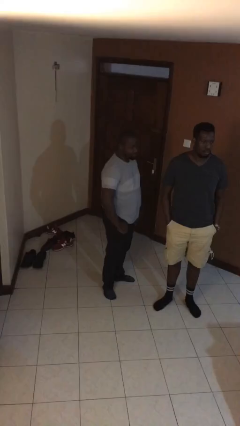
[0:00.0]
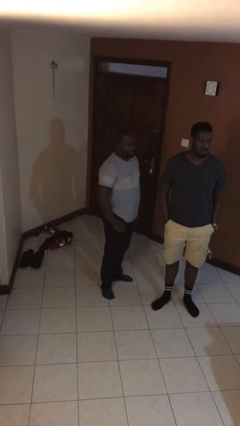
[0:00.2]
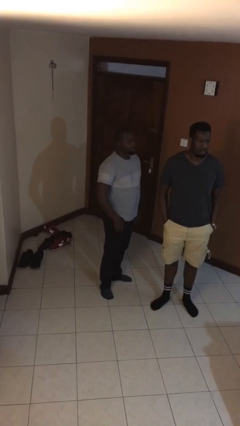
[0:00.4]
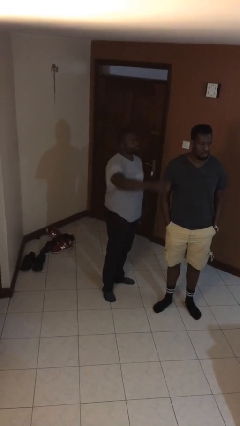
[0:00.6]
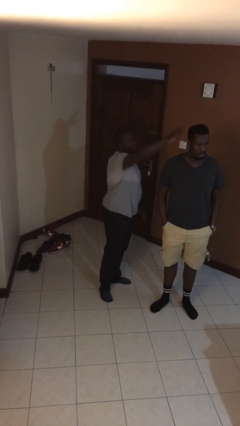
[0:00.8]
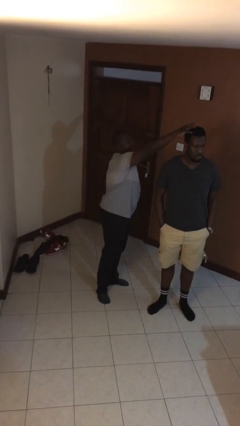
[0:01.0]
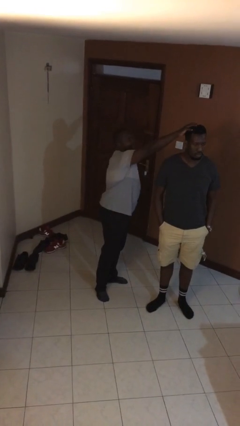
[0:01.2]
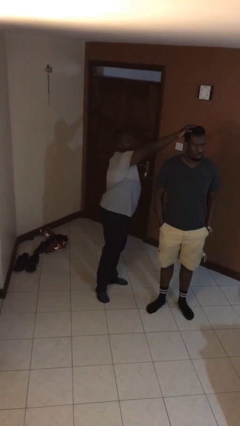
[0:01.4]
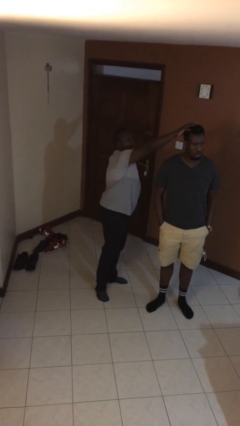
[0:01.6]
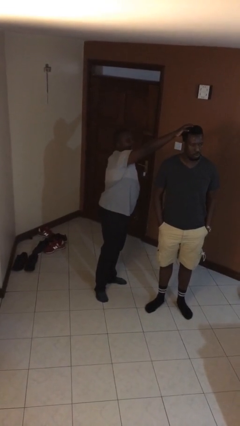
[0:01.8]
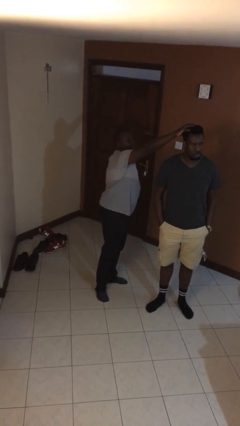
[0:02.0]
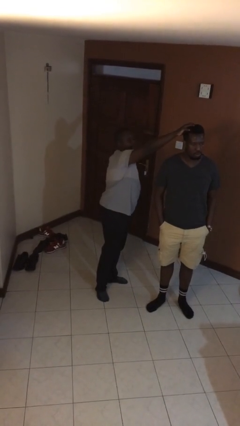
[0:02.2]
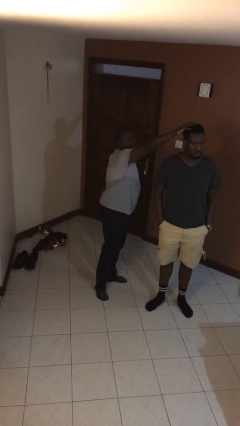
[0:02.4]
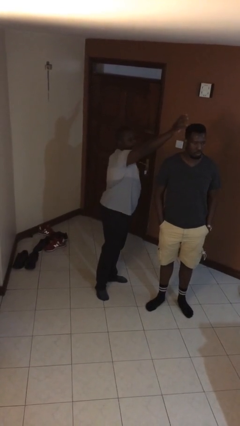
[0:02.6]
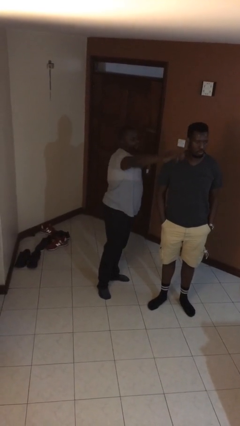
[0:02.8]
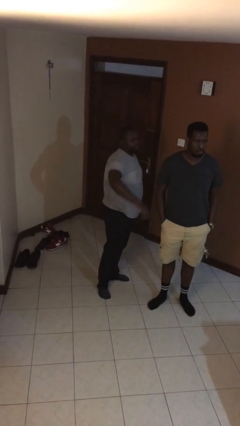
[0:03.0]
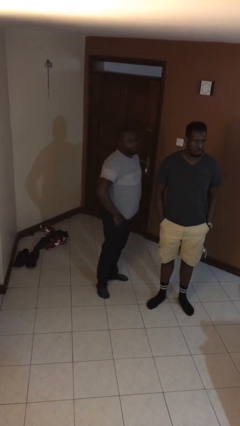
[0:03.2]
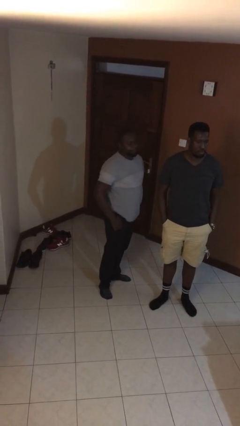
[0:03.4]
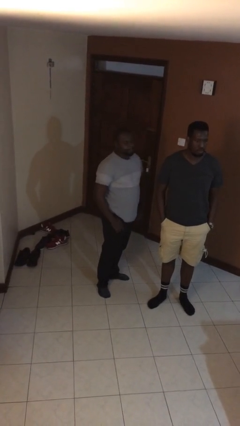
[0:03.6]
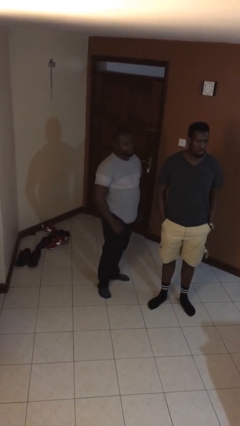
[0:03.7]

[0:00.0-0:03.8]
person grabs person by hair

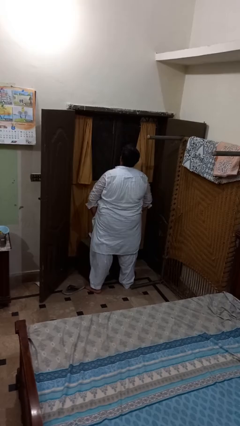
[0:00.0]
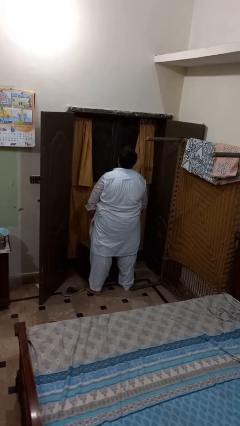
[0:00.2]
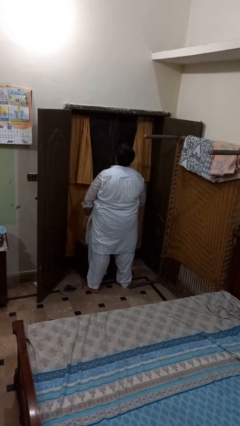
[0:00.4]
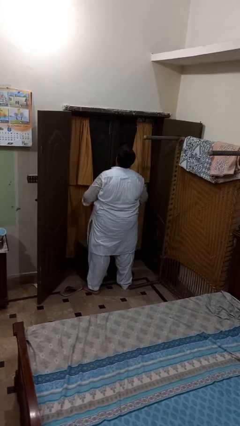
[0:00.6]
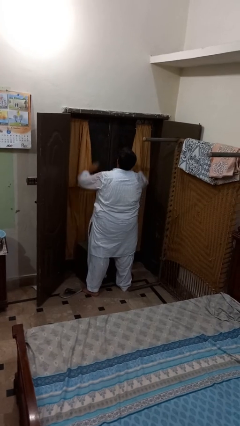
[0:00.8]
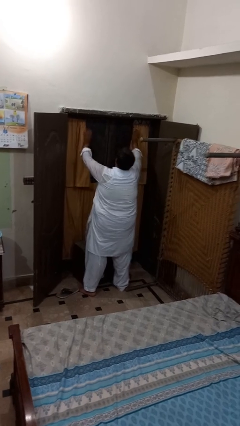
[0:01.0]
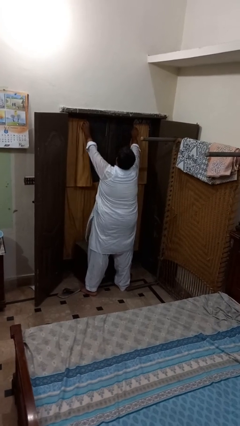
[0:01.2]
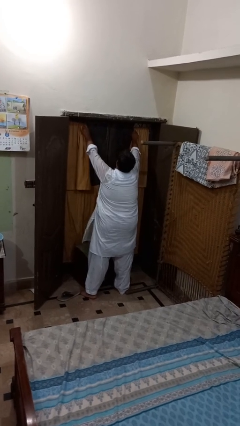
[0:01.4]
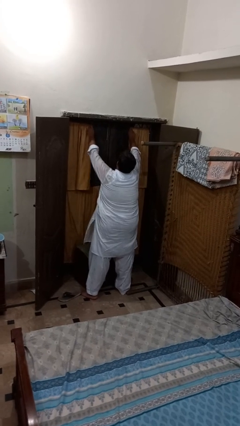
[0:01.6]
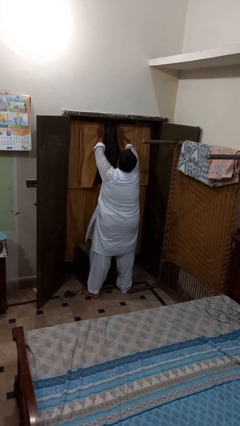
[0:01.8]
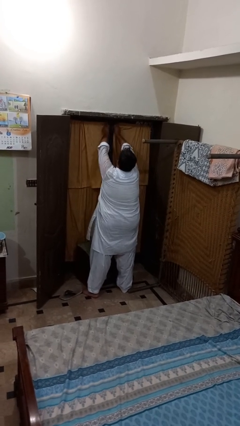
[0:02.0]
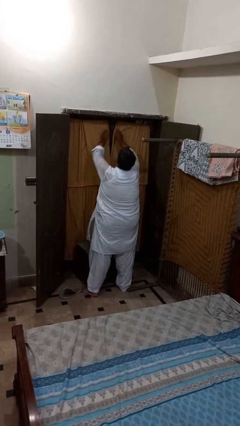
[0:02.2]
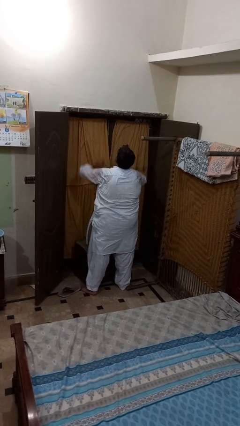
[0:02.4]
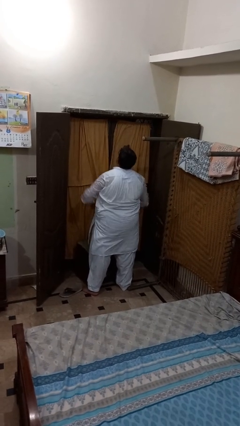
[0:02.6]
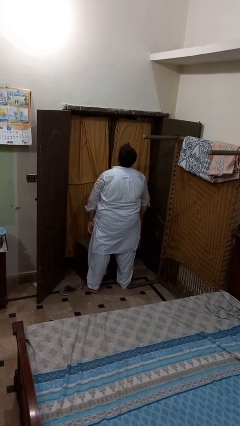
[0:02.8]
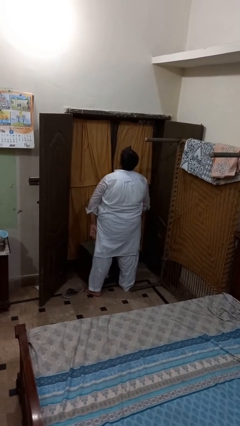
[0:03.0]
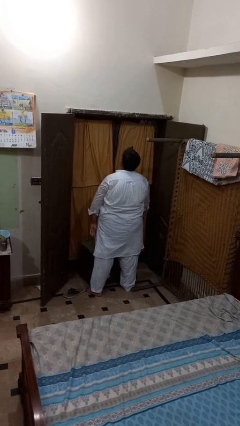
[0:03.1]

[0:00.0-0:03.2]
person closes curtains

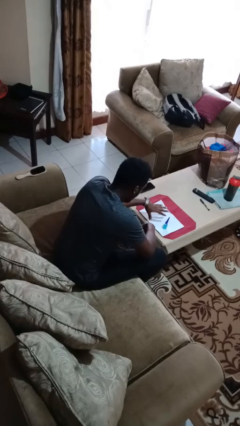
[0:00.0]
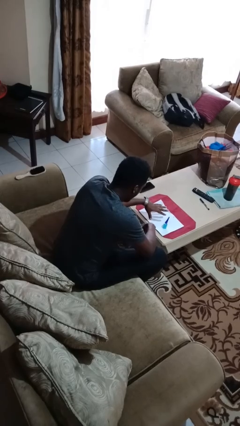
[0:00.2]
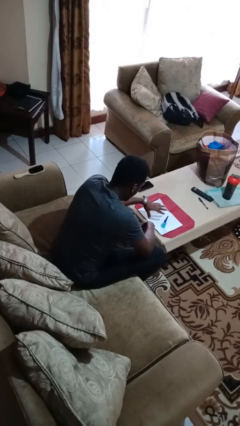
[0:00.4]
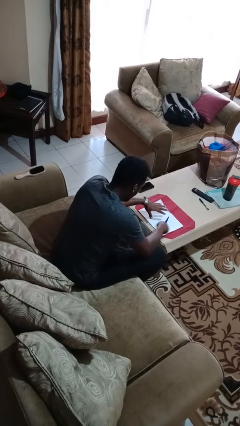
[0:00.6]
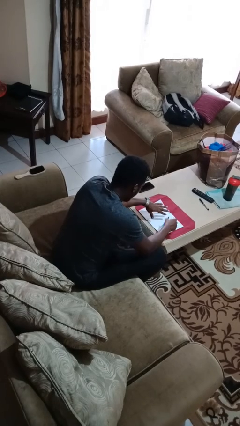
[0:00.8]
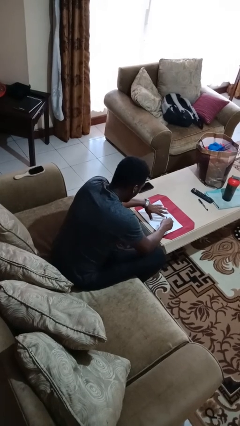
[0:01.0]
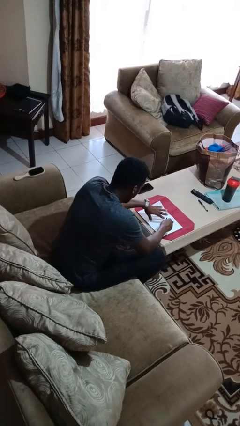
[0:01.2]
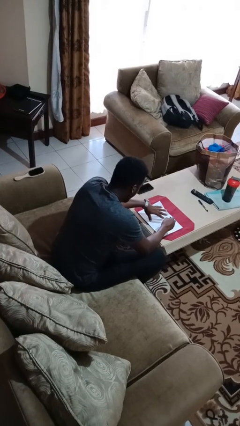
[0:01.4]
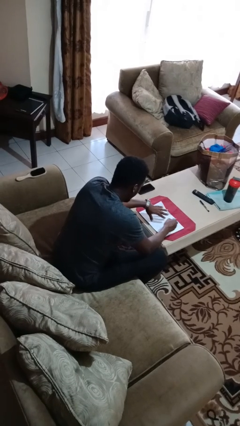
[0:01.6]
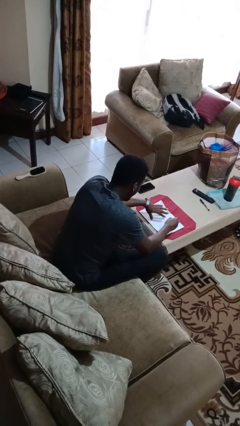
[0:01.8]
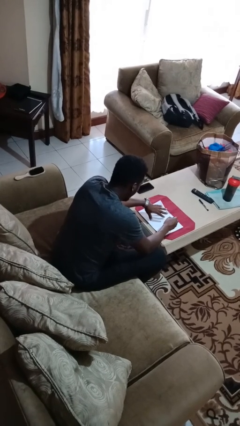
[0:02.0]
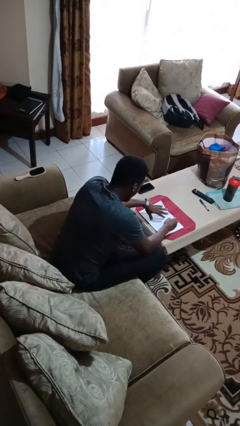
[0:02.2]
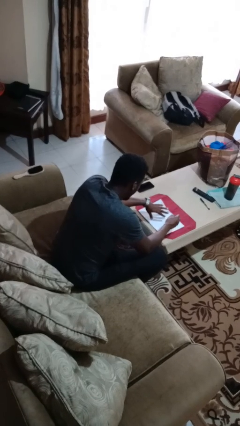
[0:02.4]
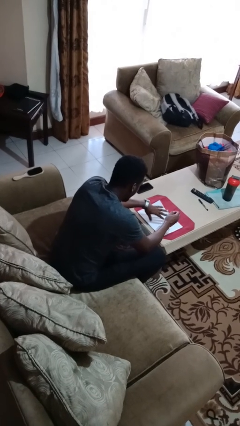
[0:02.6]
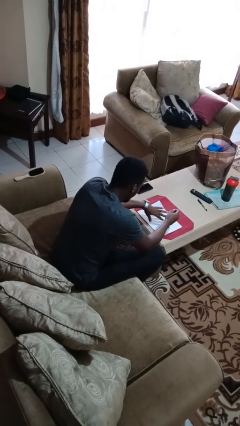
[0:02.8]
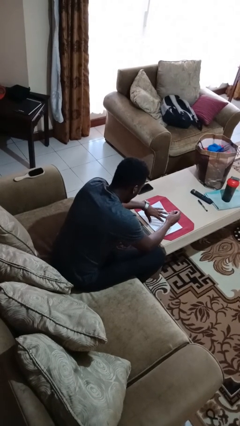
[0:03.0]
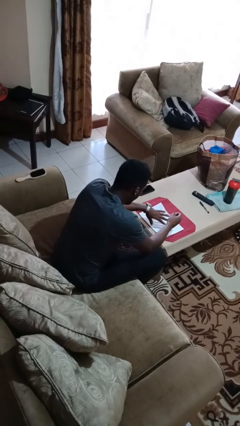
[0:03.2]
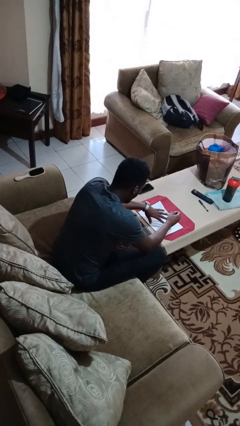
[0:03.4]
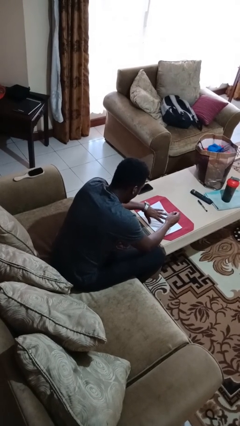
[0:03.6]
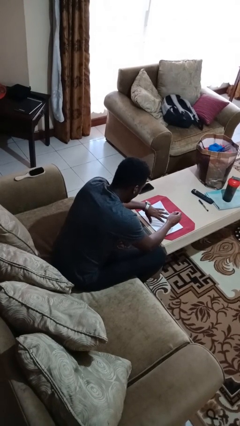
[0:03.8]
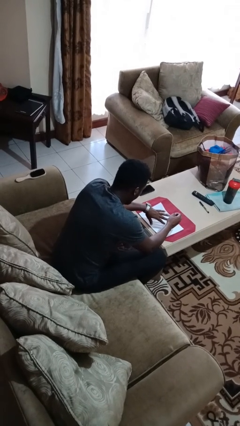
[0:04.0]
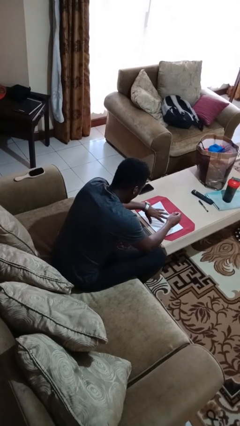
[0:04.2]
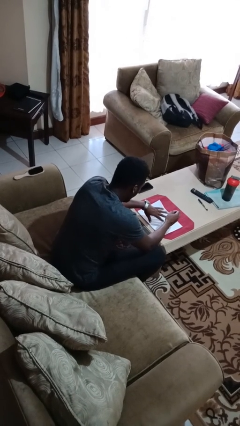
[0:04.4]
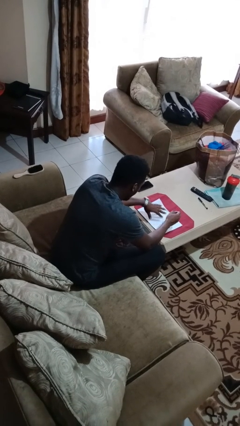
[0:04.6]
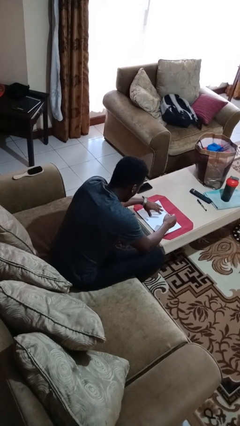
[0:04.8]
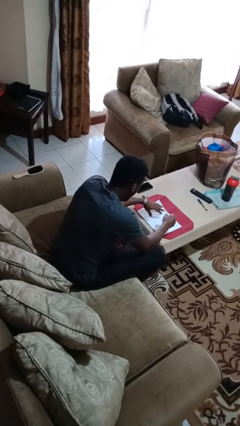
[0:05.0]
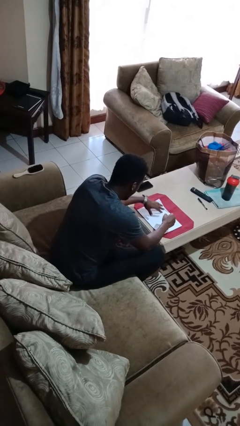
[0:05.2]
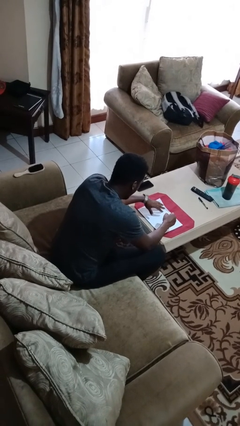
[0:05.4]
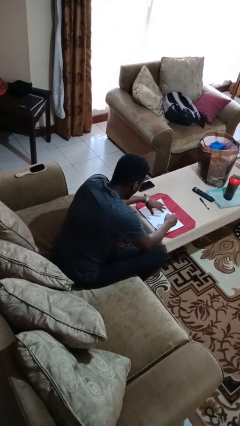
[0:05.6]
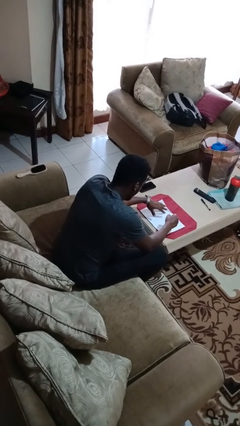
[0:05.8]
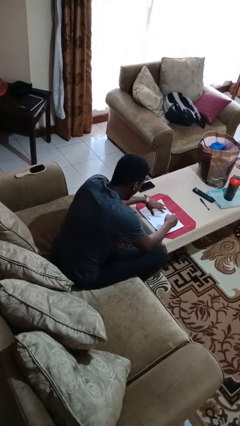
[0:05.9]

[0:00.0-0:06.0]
person paints fingernails

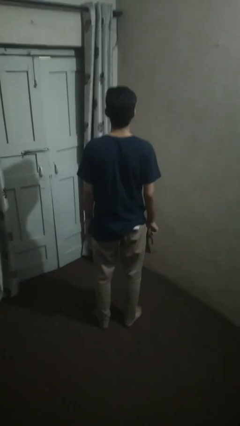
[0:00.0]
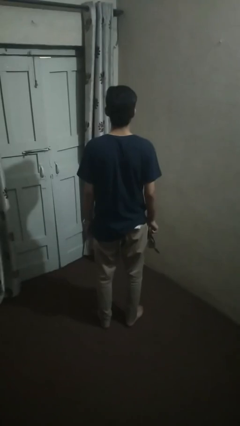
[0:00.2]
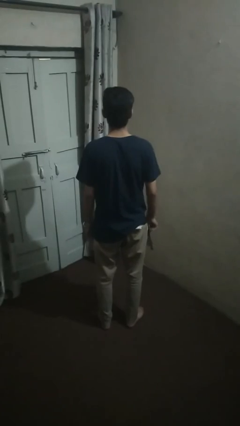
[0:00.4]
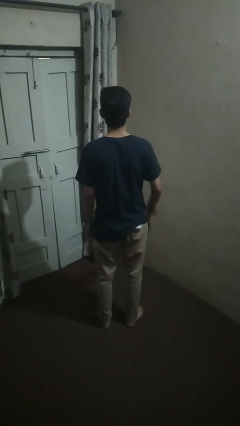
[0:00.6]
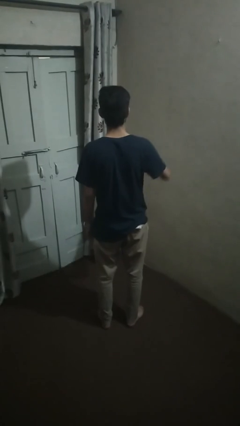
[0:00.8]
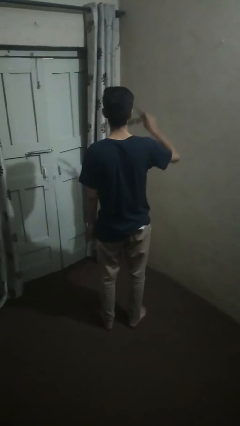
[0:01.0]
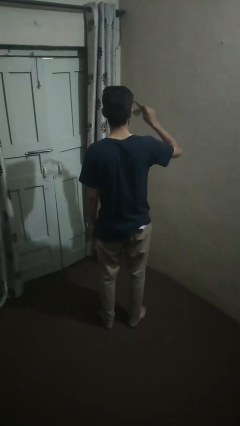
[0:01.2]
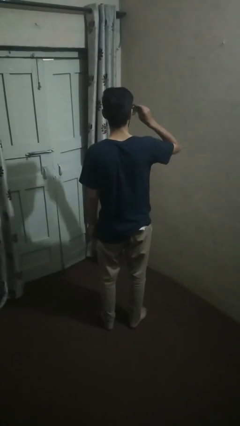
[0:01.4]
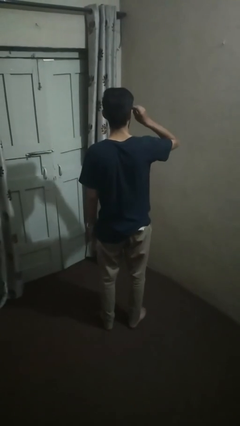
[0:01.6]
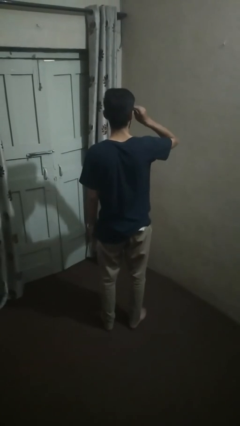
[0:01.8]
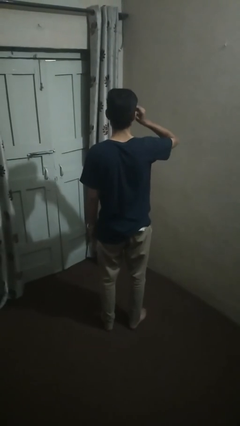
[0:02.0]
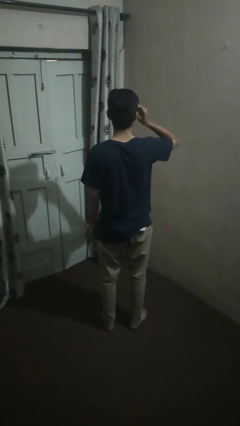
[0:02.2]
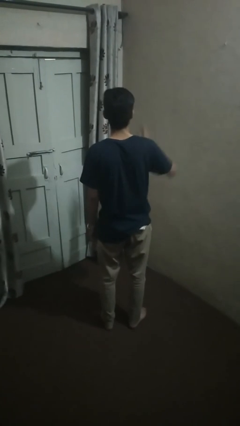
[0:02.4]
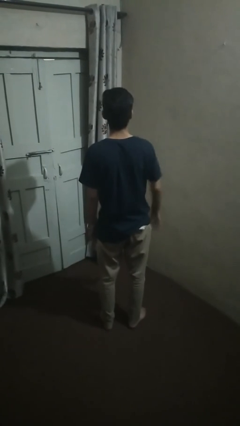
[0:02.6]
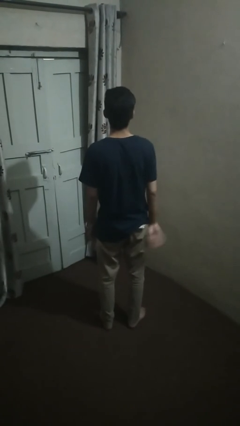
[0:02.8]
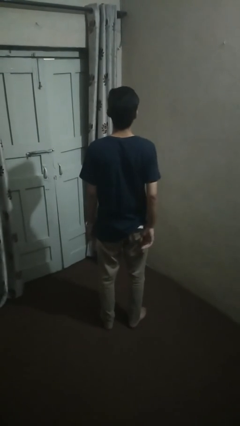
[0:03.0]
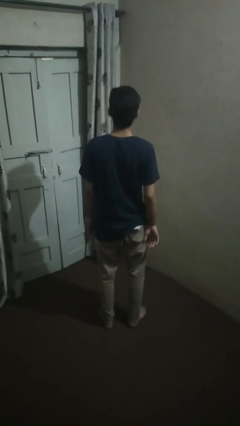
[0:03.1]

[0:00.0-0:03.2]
person puts on sunglasses

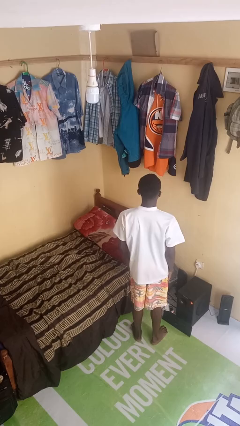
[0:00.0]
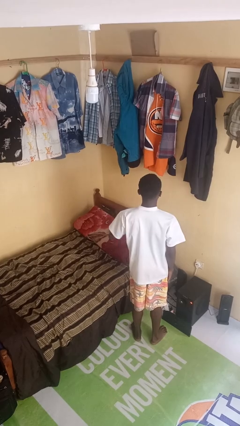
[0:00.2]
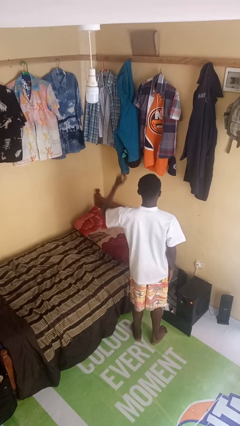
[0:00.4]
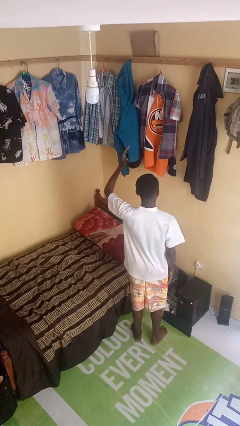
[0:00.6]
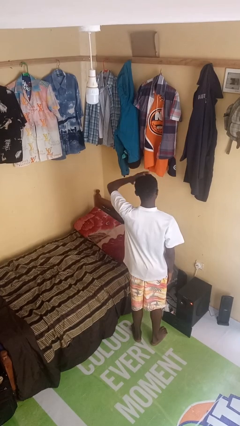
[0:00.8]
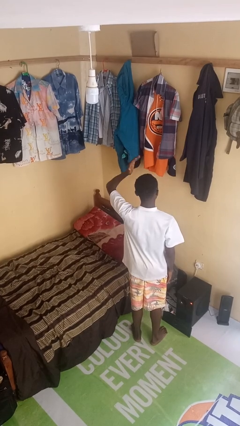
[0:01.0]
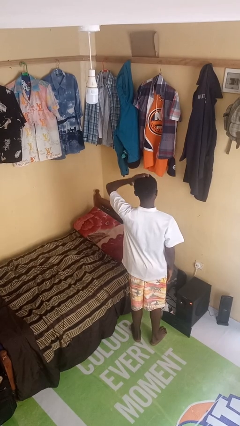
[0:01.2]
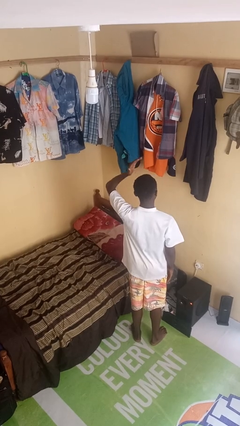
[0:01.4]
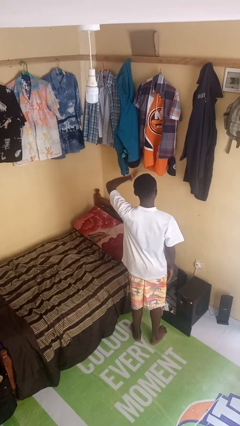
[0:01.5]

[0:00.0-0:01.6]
person pats head
